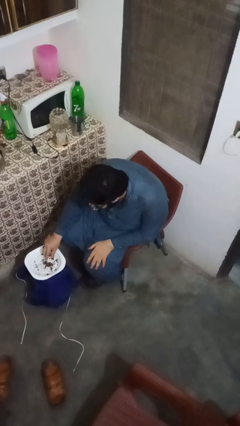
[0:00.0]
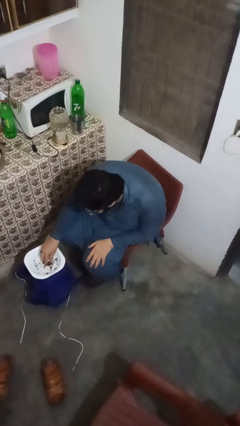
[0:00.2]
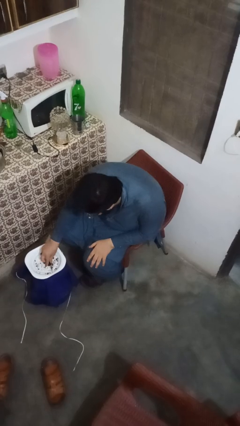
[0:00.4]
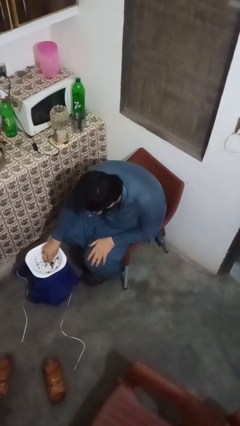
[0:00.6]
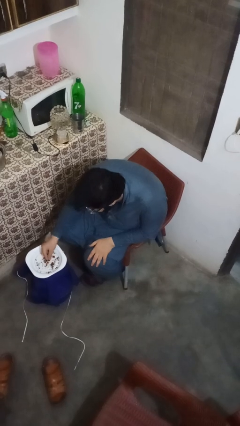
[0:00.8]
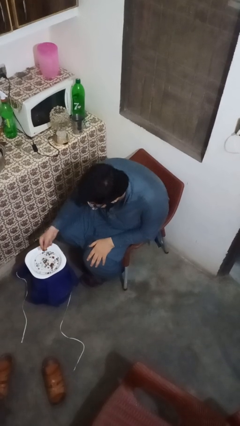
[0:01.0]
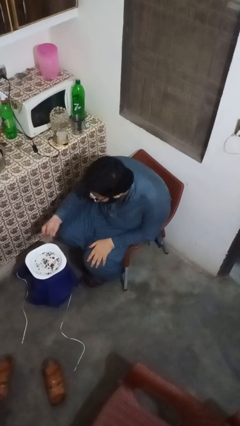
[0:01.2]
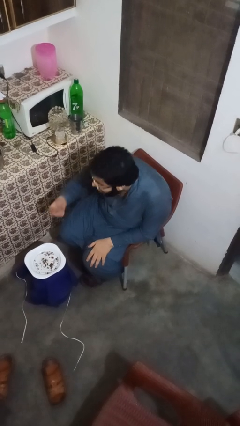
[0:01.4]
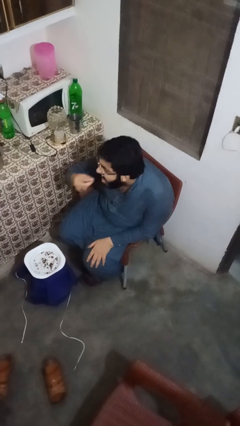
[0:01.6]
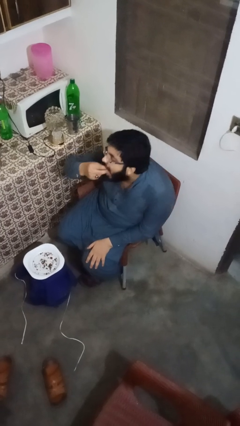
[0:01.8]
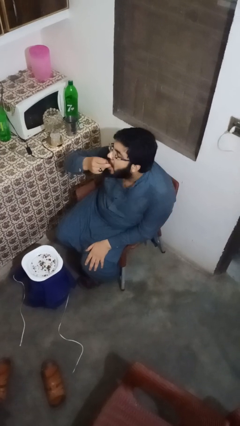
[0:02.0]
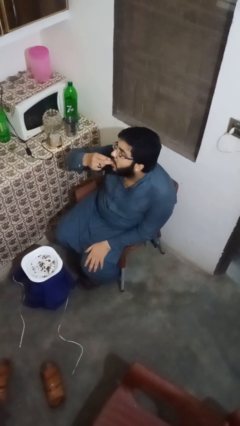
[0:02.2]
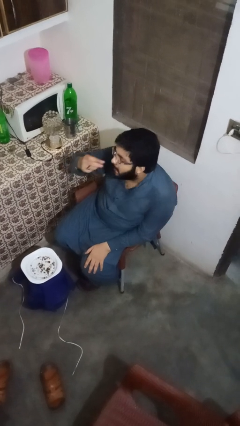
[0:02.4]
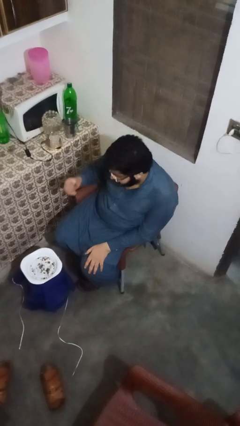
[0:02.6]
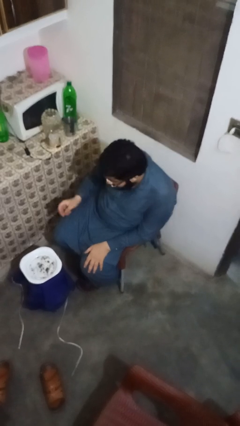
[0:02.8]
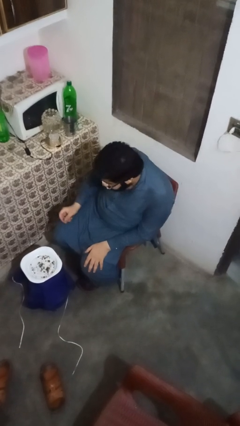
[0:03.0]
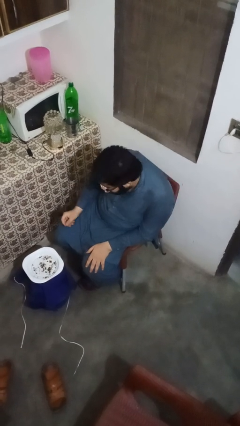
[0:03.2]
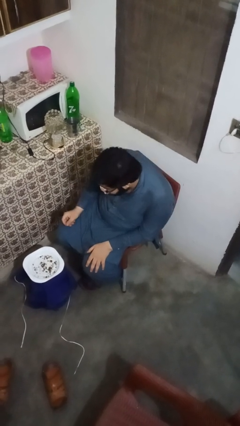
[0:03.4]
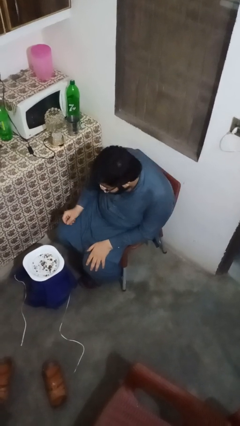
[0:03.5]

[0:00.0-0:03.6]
person eats with hands

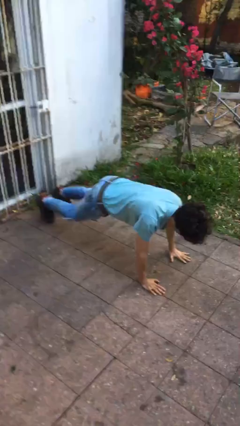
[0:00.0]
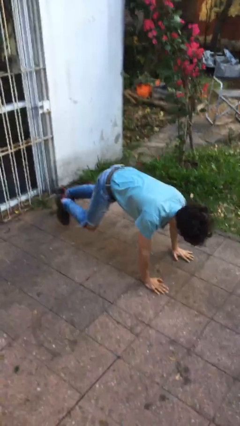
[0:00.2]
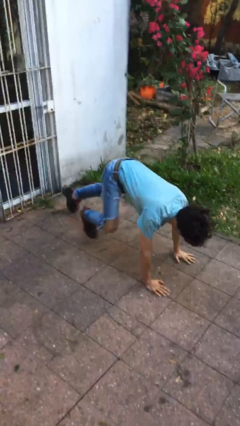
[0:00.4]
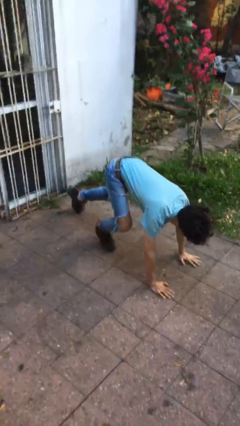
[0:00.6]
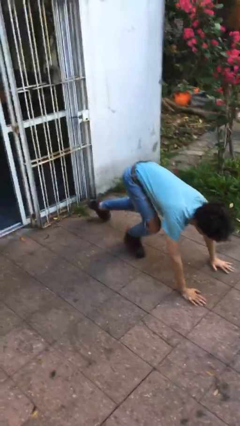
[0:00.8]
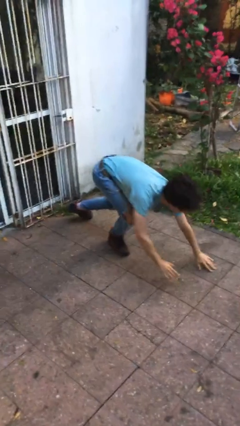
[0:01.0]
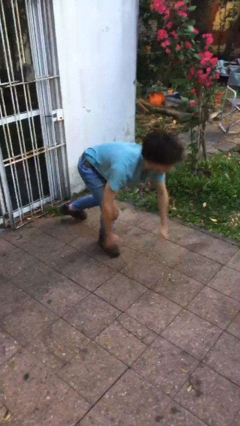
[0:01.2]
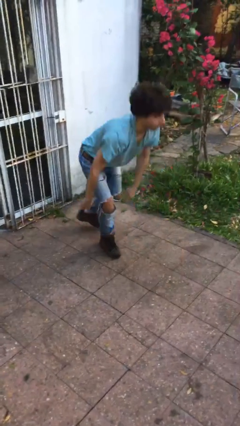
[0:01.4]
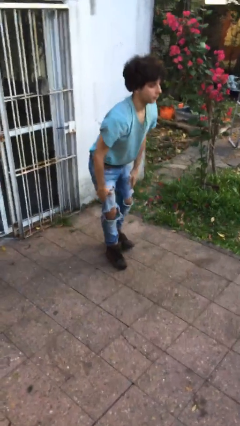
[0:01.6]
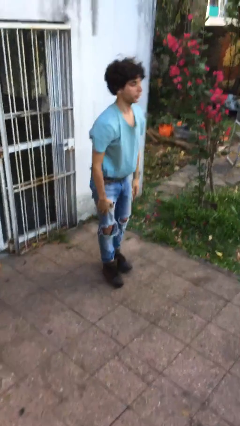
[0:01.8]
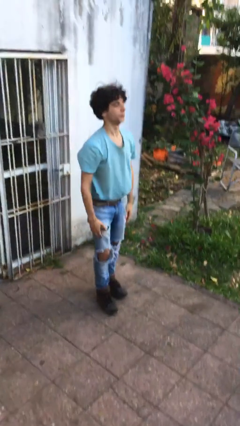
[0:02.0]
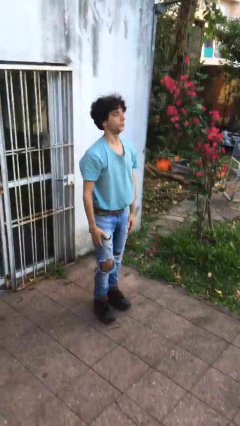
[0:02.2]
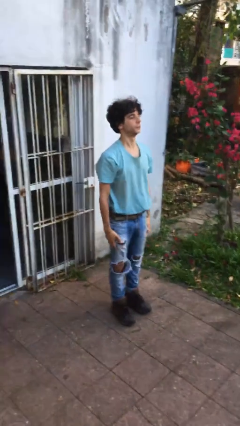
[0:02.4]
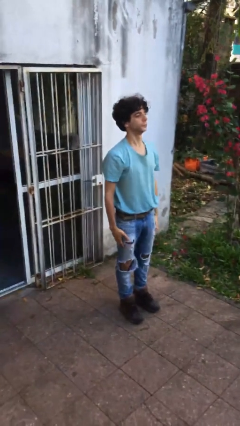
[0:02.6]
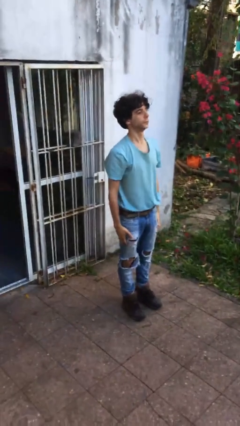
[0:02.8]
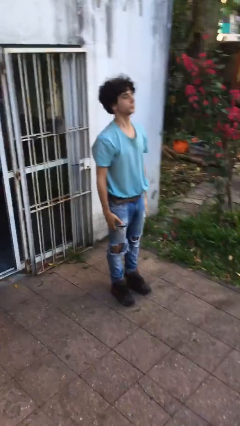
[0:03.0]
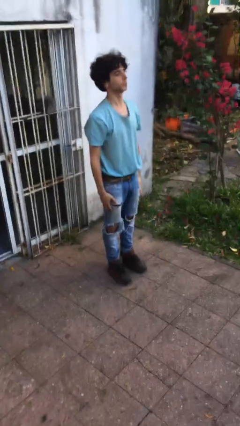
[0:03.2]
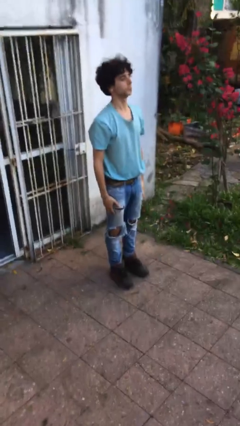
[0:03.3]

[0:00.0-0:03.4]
person stands up from floor

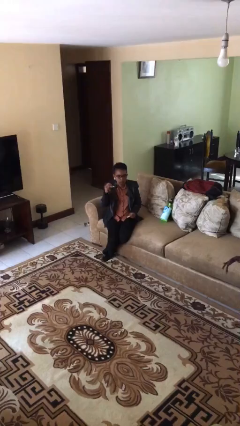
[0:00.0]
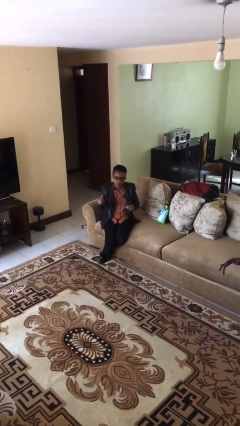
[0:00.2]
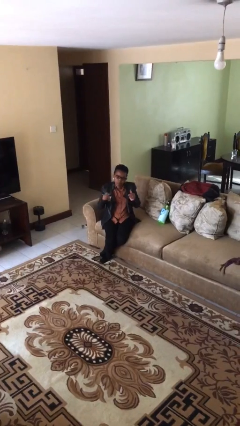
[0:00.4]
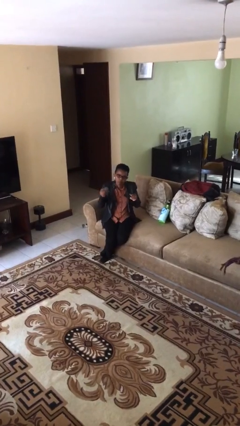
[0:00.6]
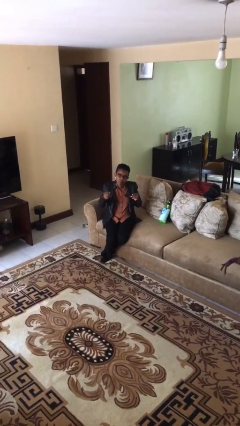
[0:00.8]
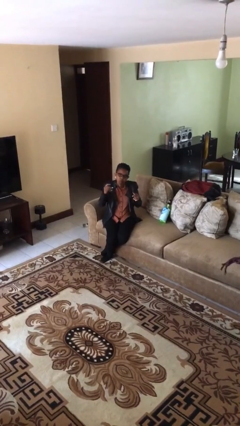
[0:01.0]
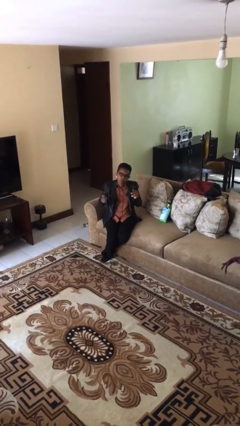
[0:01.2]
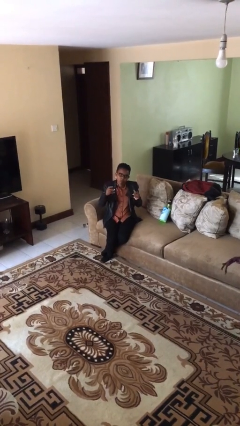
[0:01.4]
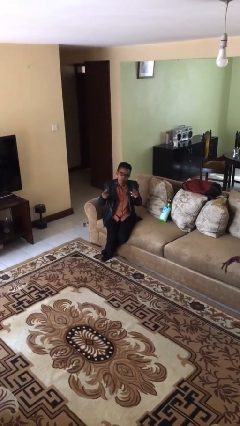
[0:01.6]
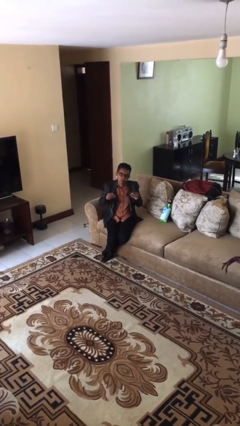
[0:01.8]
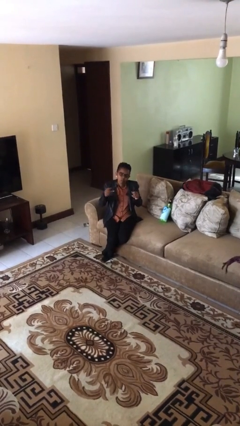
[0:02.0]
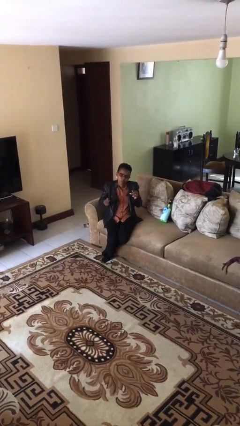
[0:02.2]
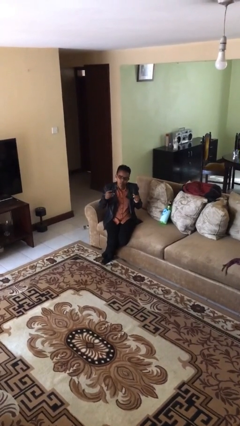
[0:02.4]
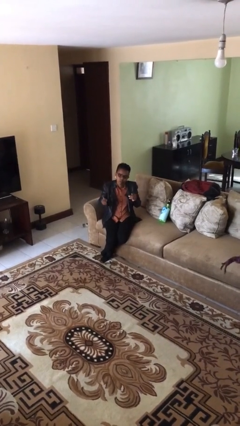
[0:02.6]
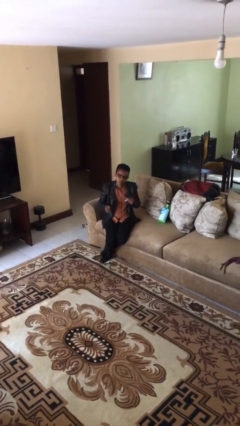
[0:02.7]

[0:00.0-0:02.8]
person snaps fingers

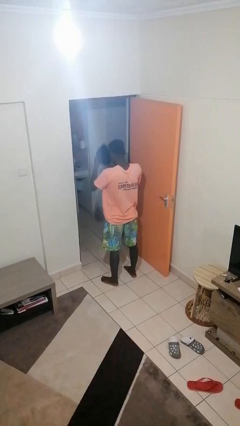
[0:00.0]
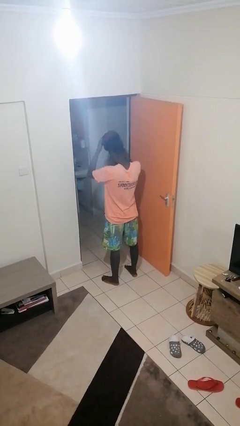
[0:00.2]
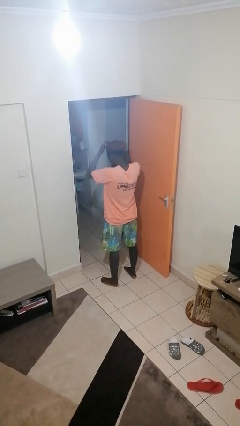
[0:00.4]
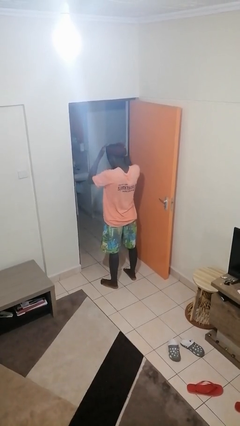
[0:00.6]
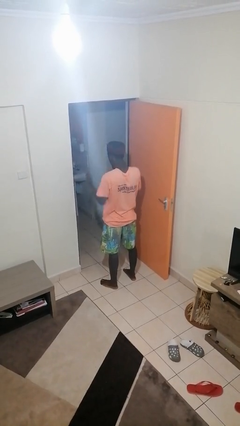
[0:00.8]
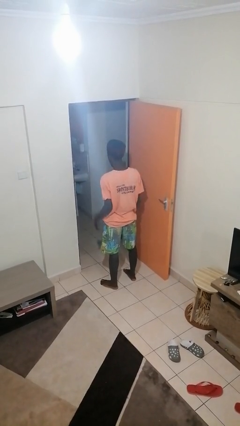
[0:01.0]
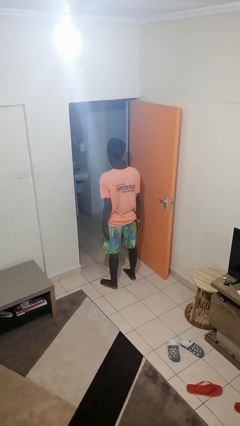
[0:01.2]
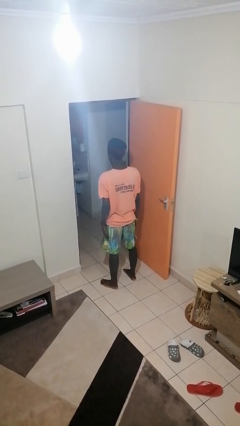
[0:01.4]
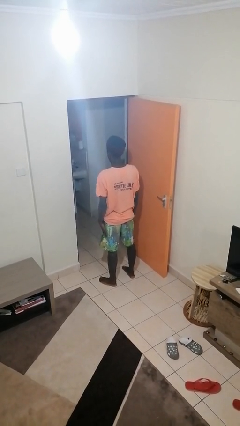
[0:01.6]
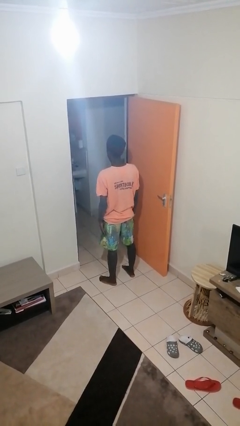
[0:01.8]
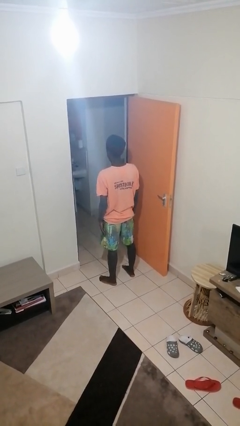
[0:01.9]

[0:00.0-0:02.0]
person puts on hat

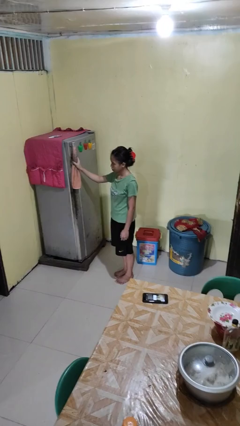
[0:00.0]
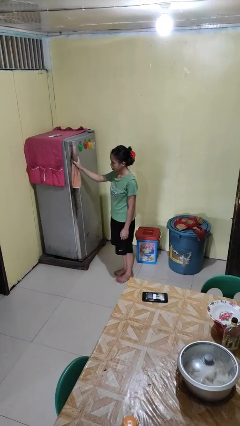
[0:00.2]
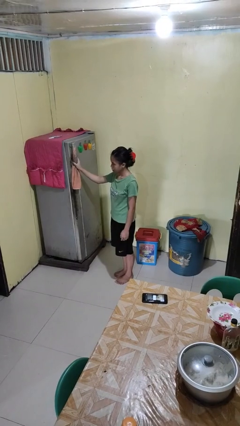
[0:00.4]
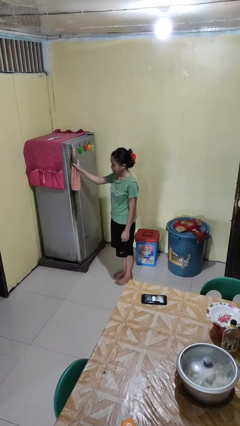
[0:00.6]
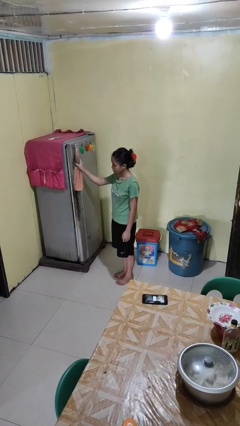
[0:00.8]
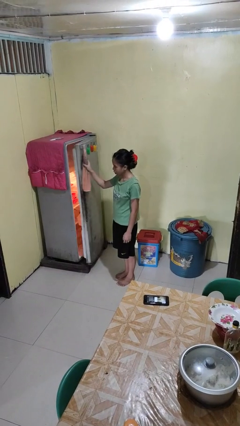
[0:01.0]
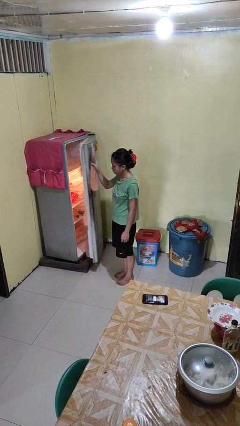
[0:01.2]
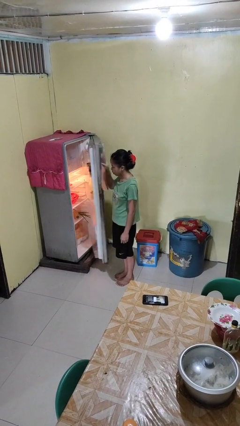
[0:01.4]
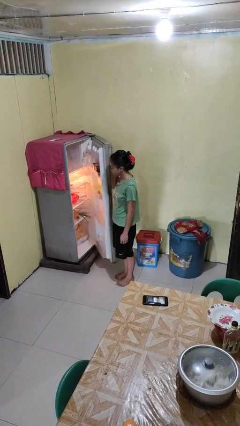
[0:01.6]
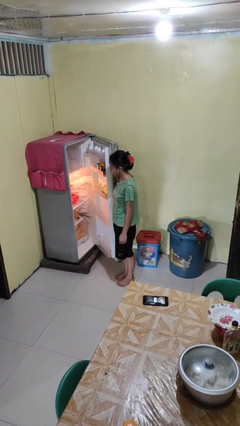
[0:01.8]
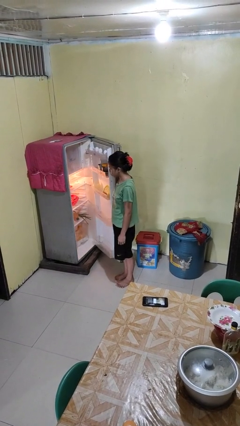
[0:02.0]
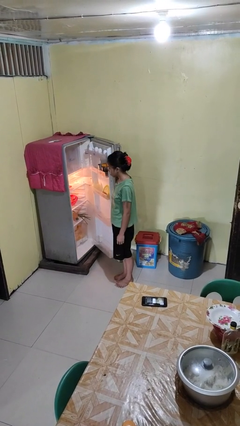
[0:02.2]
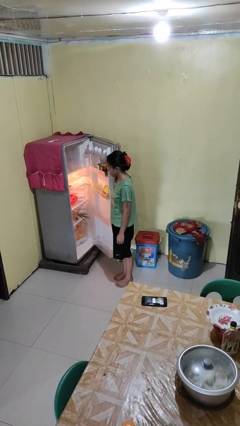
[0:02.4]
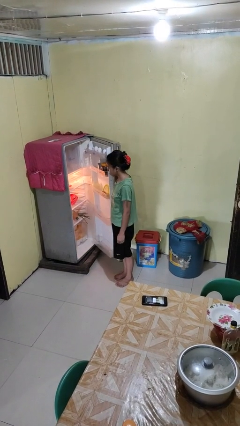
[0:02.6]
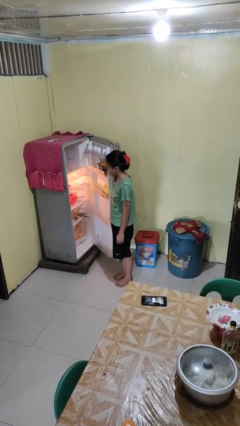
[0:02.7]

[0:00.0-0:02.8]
person opens refrigerator

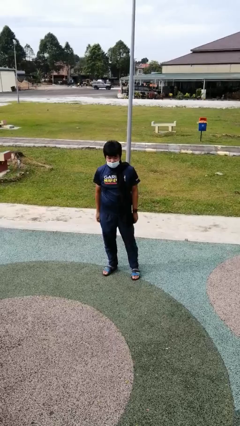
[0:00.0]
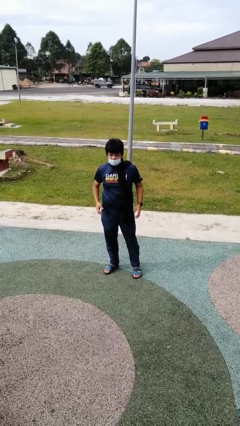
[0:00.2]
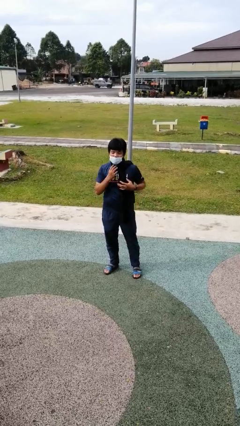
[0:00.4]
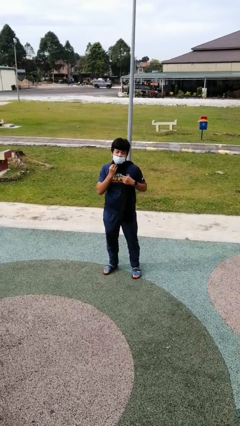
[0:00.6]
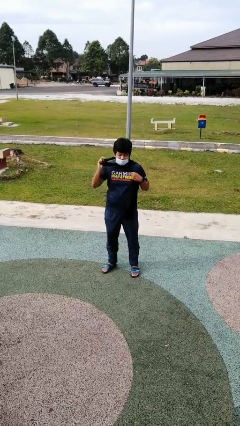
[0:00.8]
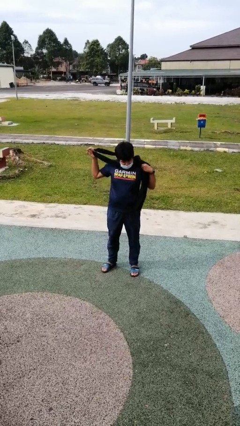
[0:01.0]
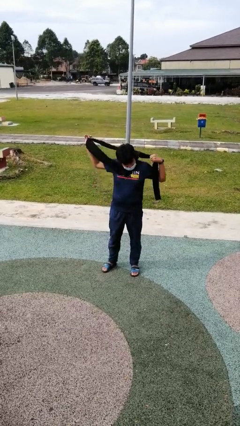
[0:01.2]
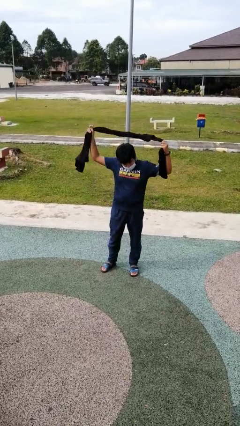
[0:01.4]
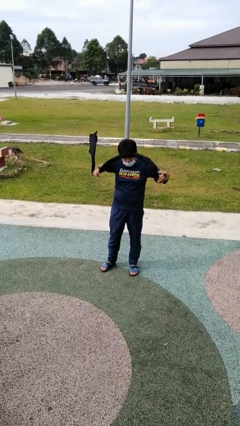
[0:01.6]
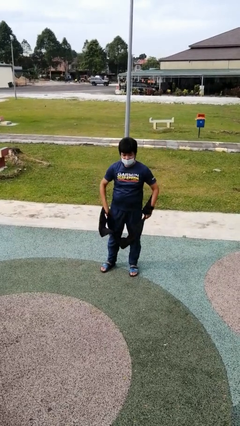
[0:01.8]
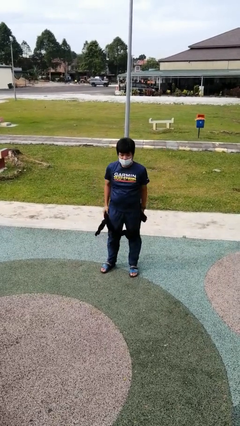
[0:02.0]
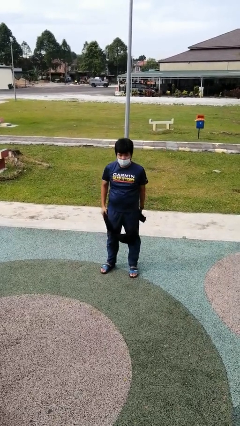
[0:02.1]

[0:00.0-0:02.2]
person takes off scarf

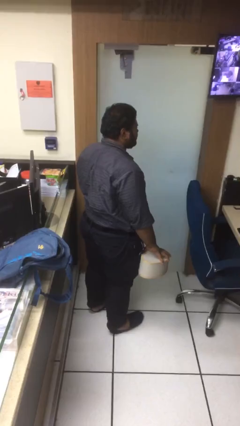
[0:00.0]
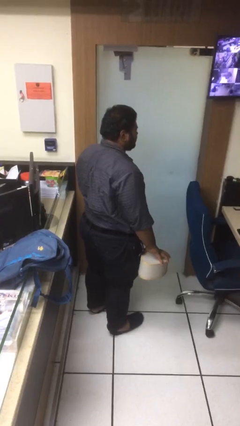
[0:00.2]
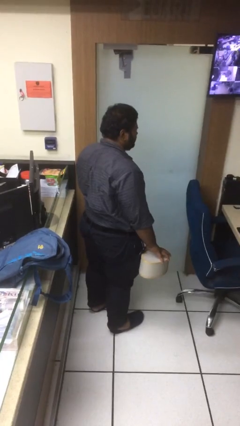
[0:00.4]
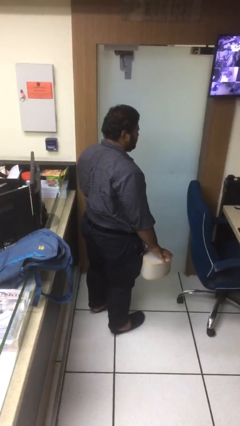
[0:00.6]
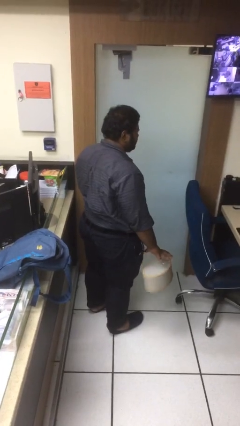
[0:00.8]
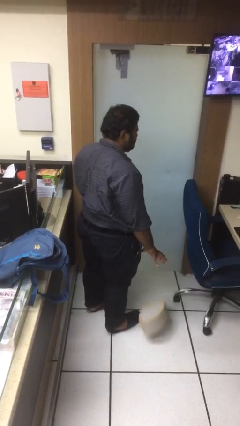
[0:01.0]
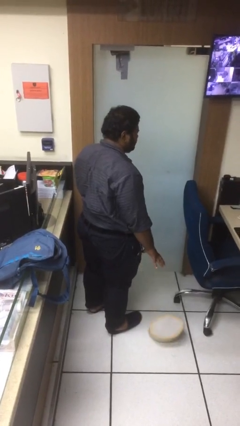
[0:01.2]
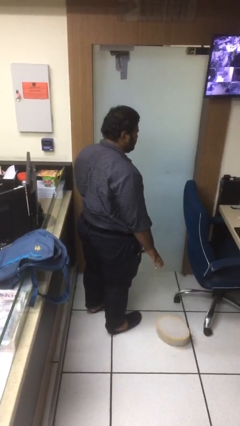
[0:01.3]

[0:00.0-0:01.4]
person drops object
